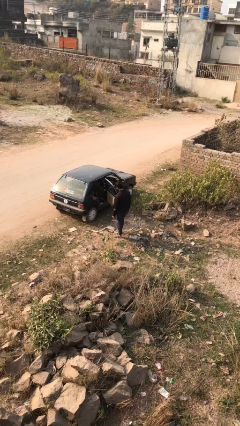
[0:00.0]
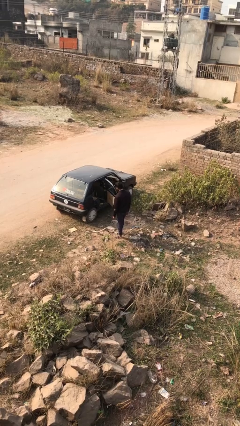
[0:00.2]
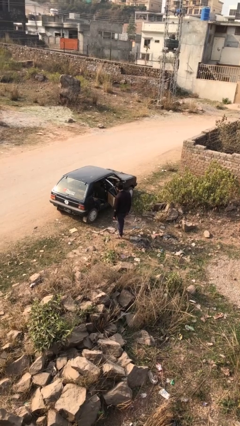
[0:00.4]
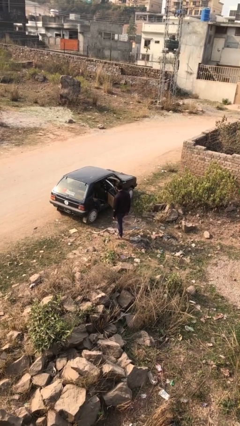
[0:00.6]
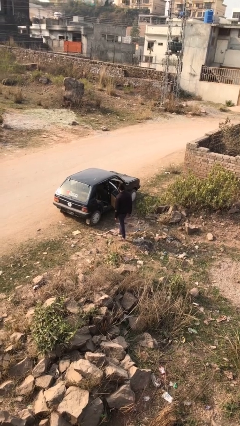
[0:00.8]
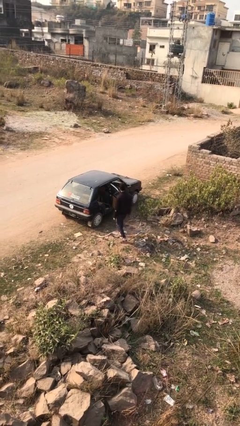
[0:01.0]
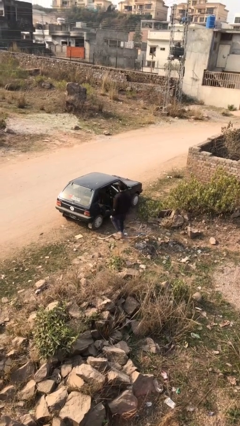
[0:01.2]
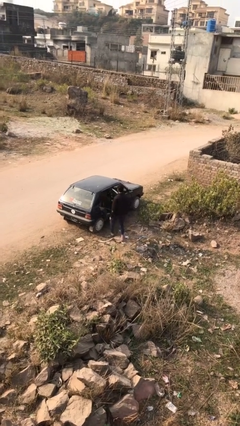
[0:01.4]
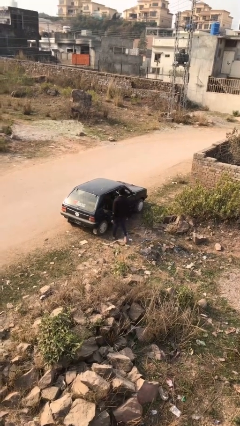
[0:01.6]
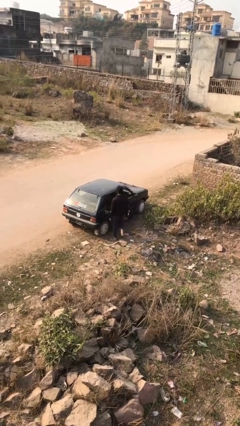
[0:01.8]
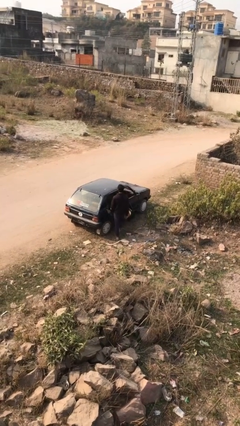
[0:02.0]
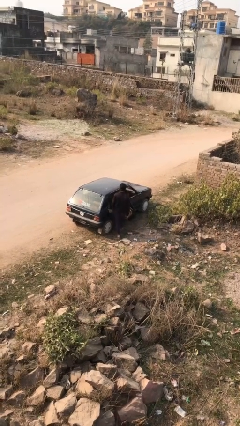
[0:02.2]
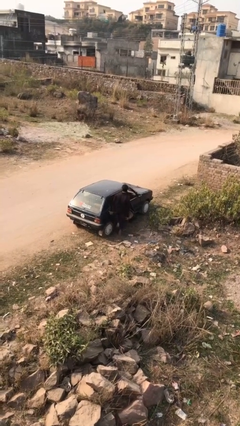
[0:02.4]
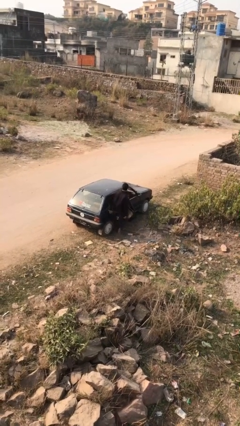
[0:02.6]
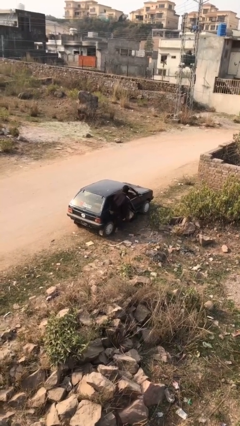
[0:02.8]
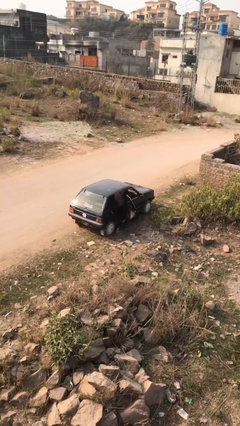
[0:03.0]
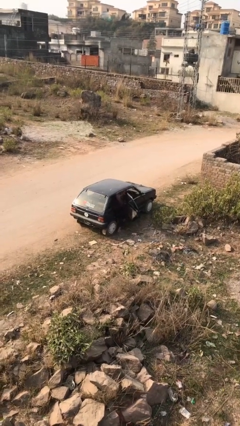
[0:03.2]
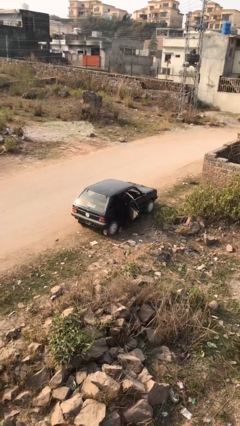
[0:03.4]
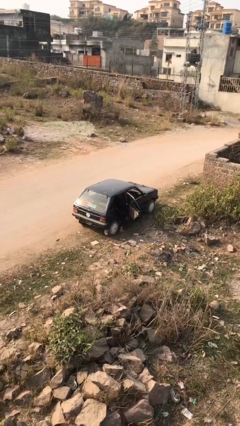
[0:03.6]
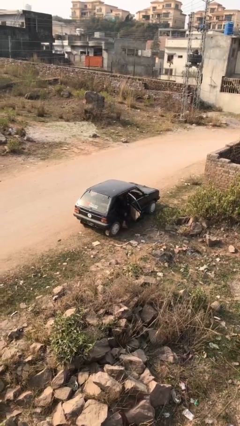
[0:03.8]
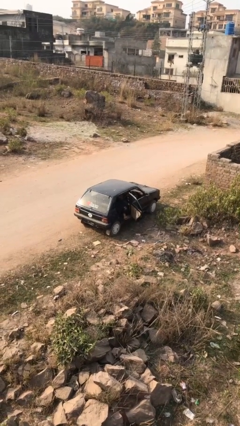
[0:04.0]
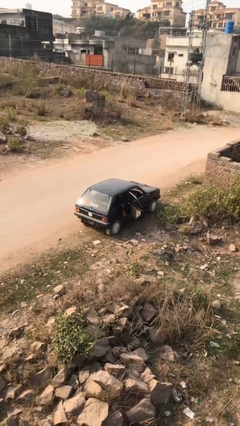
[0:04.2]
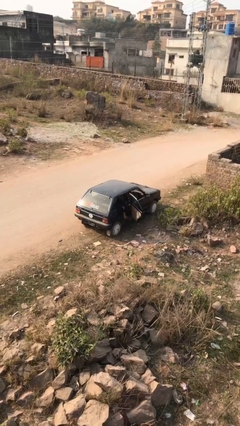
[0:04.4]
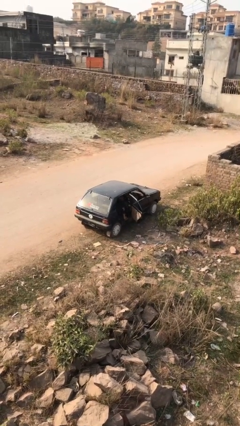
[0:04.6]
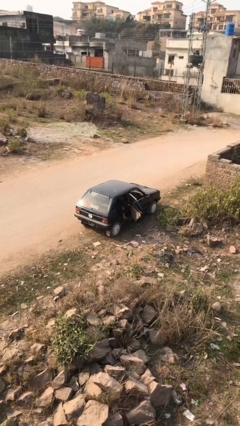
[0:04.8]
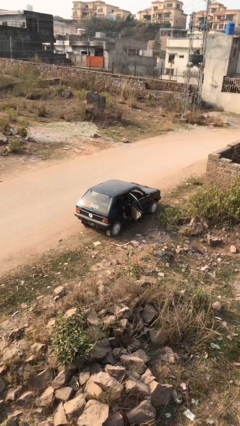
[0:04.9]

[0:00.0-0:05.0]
person enters car

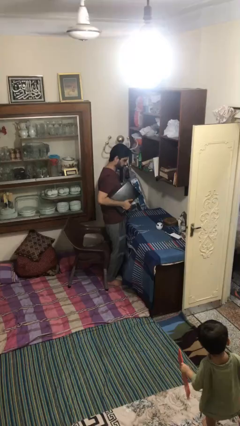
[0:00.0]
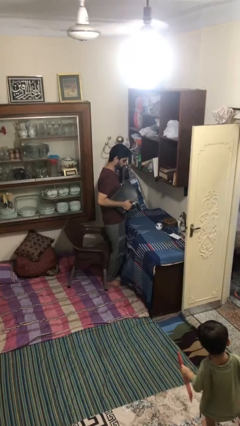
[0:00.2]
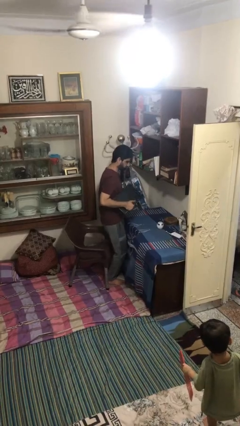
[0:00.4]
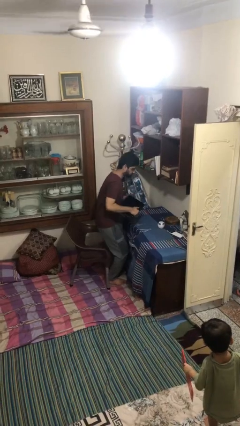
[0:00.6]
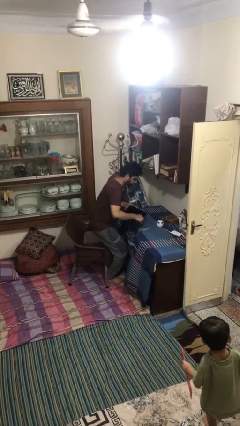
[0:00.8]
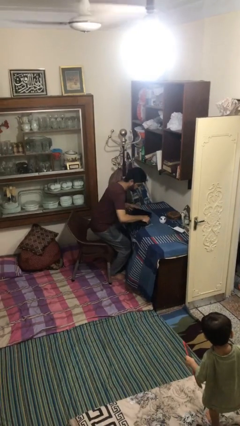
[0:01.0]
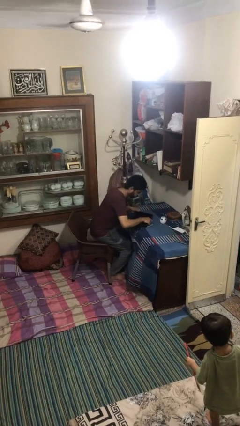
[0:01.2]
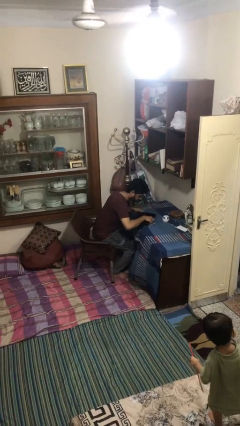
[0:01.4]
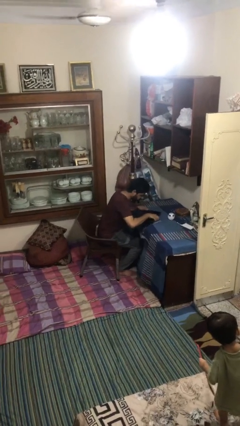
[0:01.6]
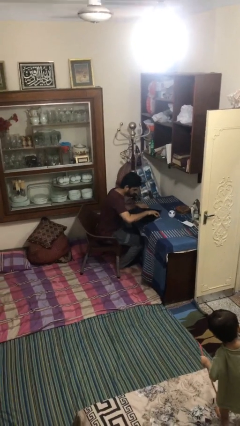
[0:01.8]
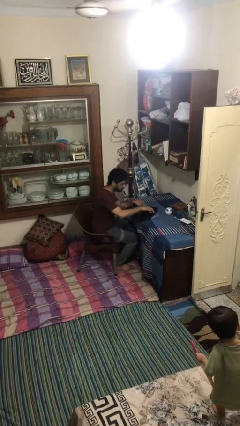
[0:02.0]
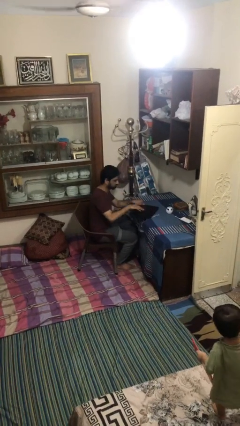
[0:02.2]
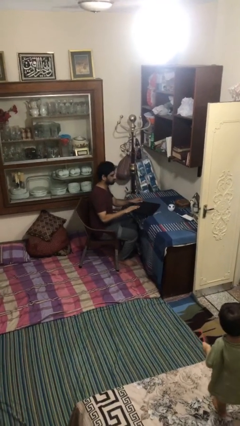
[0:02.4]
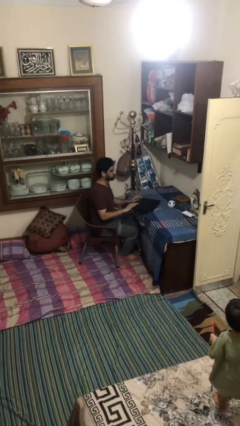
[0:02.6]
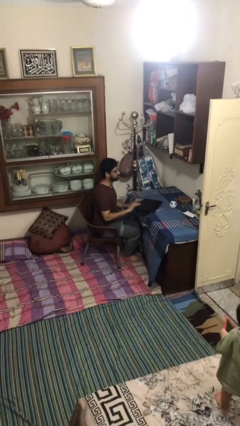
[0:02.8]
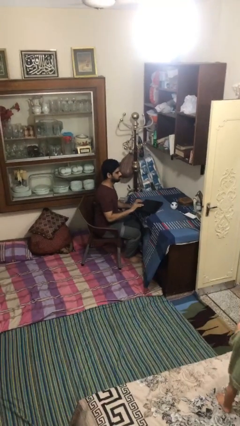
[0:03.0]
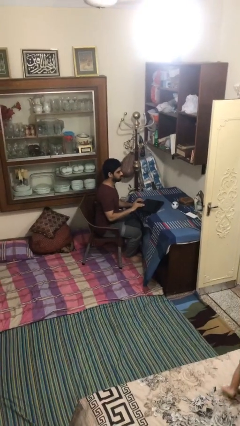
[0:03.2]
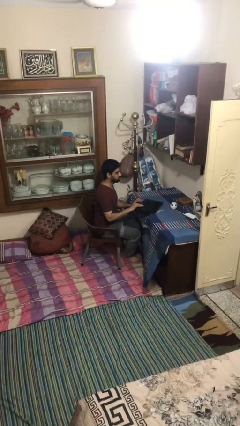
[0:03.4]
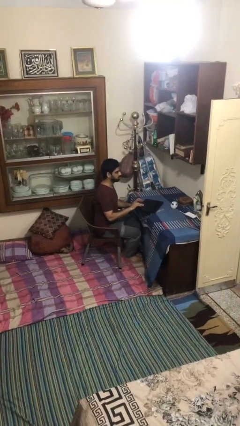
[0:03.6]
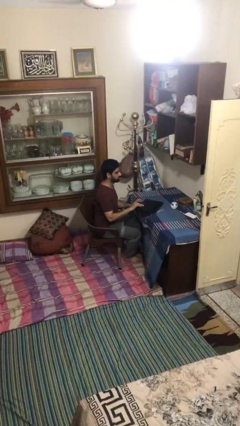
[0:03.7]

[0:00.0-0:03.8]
person sits down

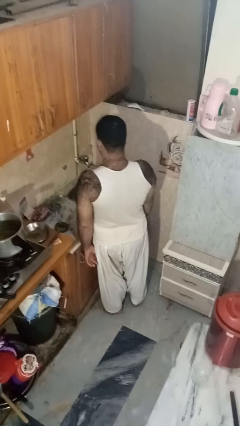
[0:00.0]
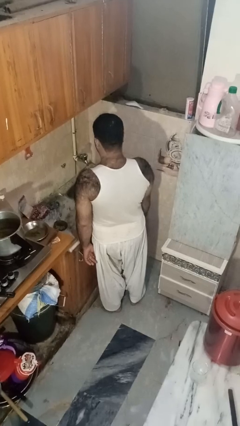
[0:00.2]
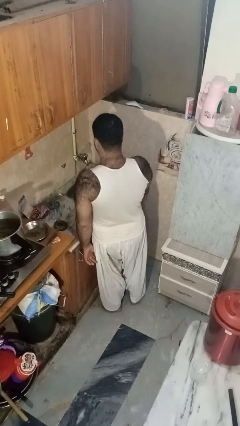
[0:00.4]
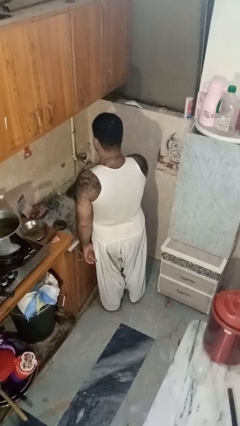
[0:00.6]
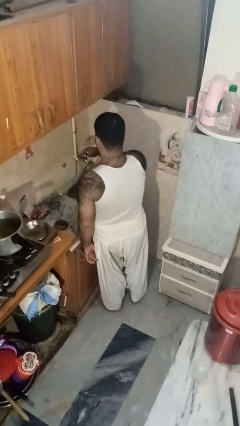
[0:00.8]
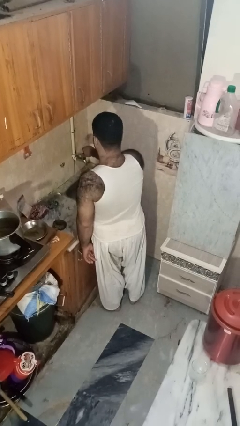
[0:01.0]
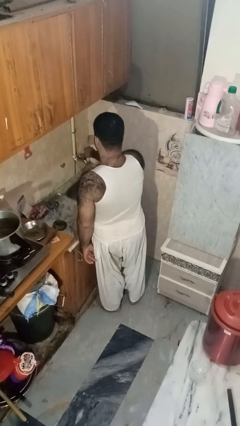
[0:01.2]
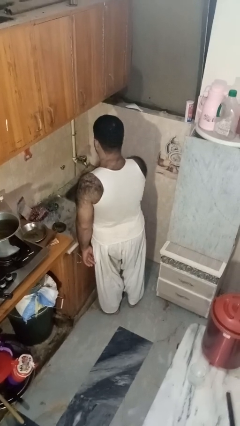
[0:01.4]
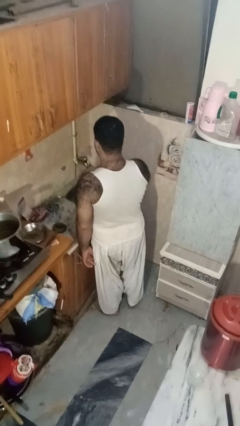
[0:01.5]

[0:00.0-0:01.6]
person turns off faucet

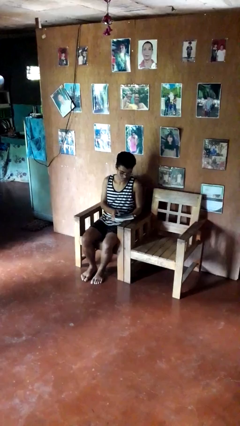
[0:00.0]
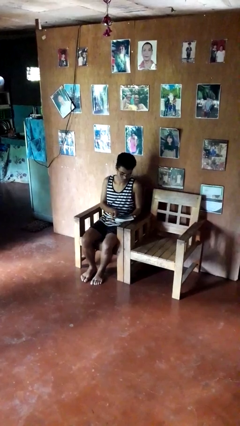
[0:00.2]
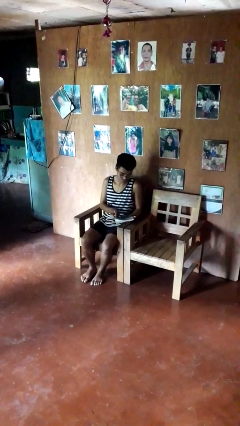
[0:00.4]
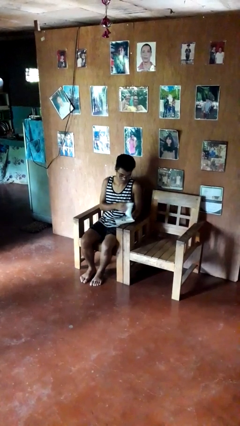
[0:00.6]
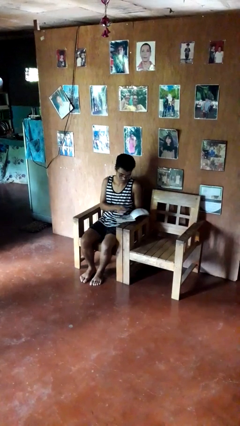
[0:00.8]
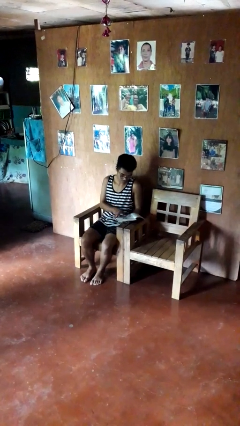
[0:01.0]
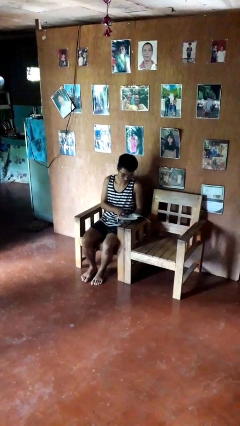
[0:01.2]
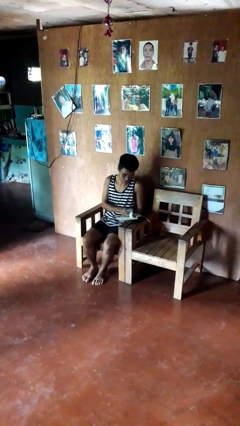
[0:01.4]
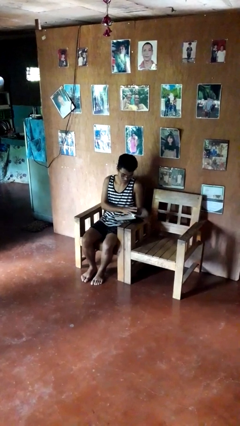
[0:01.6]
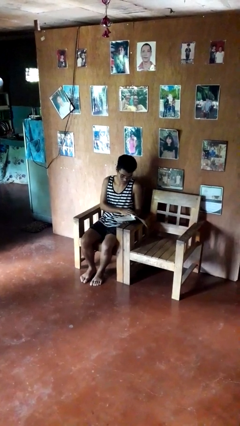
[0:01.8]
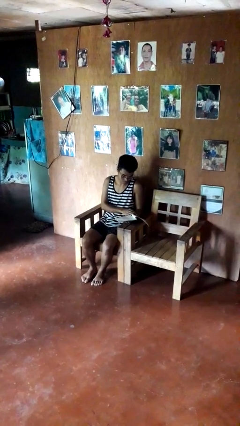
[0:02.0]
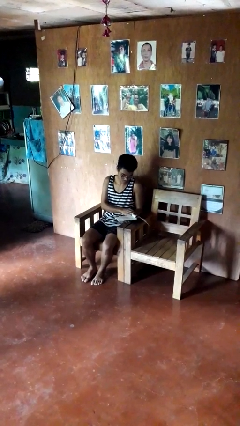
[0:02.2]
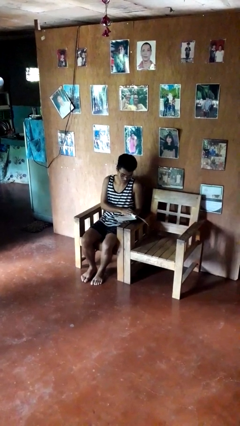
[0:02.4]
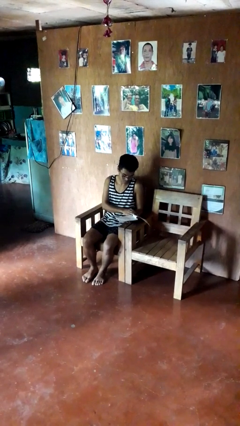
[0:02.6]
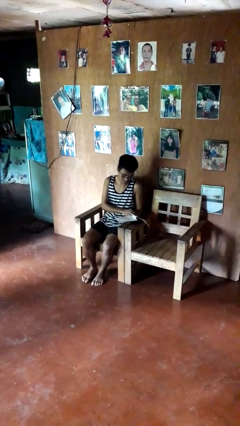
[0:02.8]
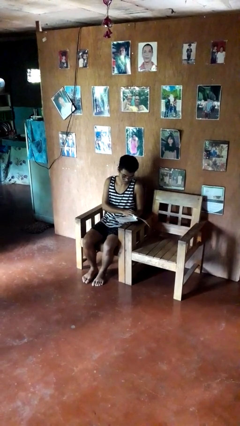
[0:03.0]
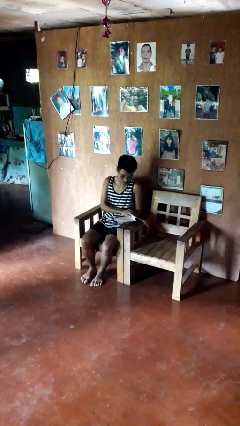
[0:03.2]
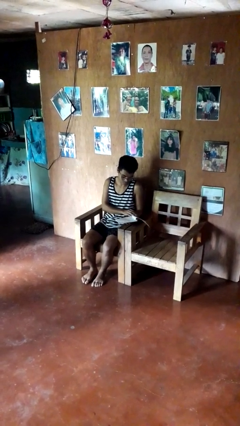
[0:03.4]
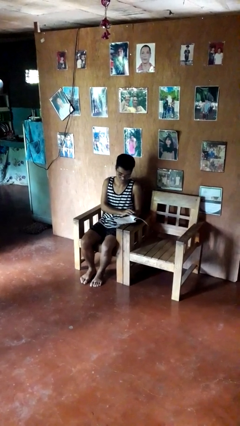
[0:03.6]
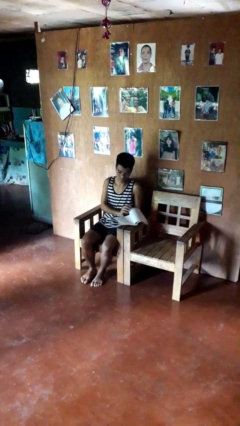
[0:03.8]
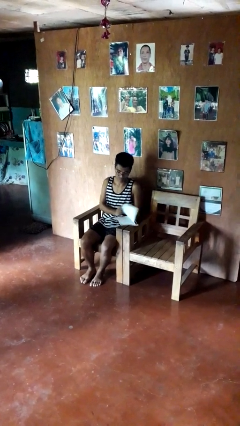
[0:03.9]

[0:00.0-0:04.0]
person reads book

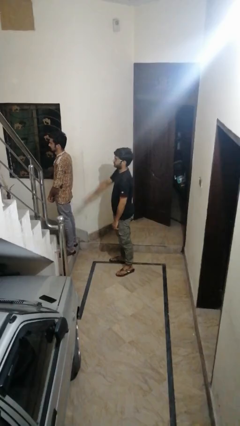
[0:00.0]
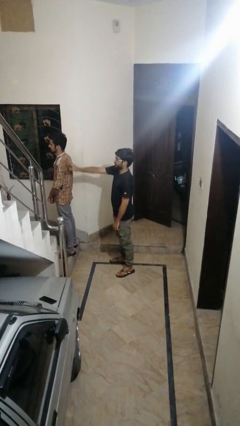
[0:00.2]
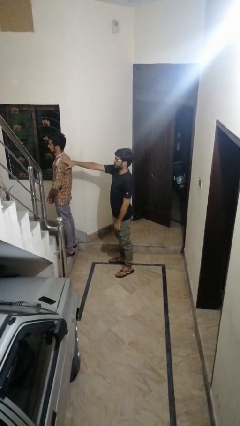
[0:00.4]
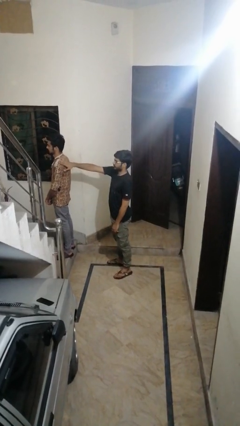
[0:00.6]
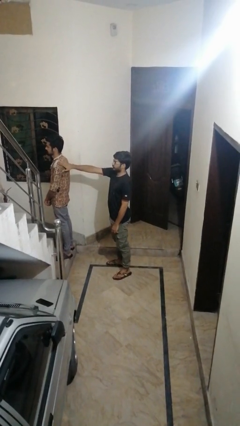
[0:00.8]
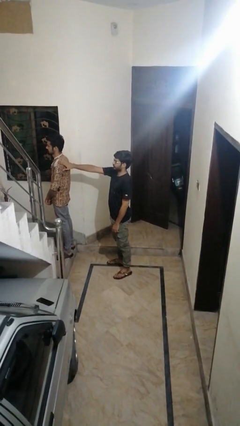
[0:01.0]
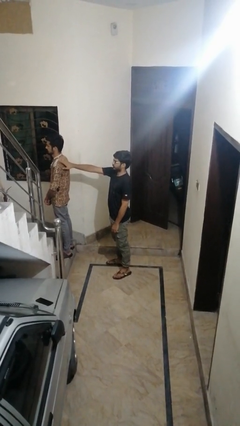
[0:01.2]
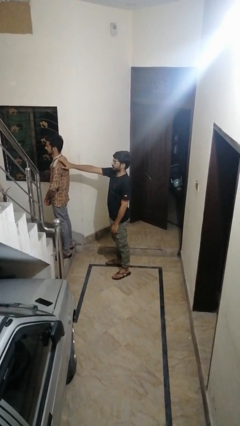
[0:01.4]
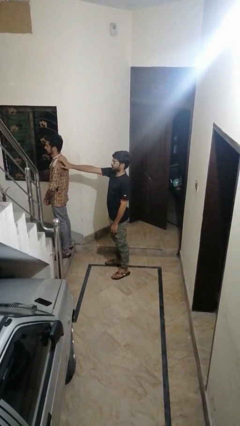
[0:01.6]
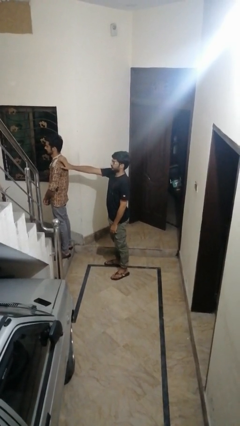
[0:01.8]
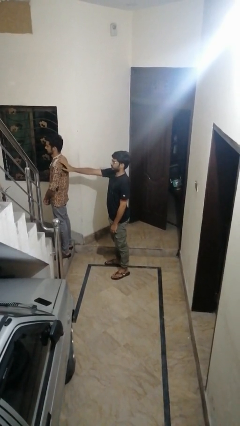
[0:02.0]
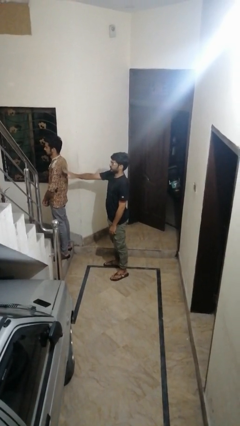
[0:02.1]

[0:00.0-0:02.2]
person touches back of person

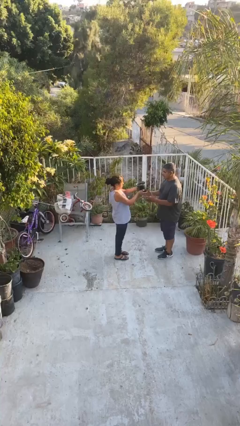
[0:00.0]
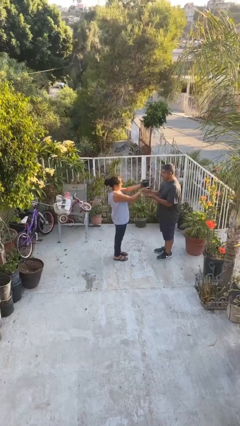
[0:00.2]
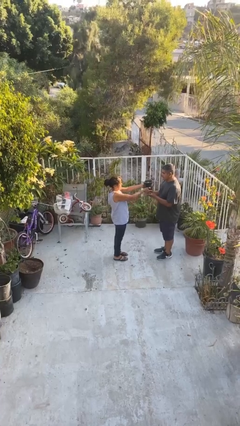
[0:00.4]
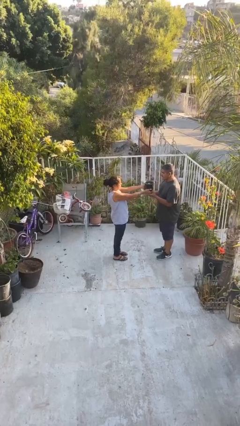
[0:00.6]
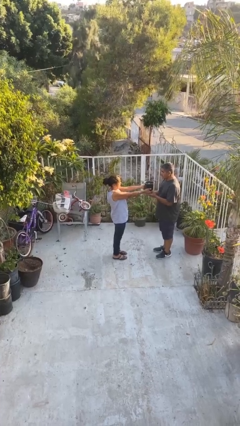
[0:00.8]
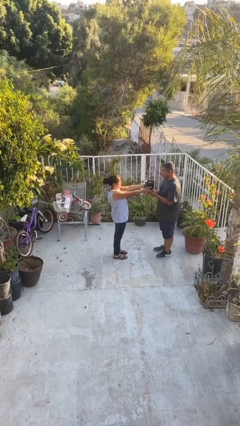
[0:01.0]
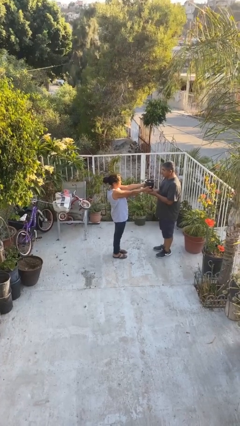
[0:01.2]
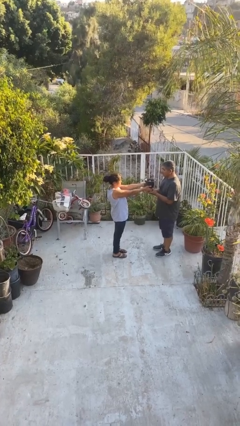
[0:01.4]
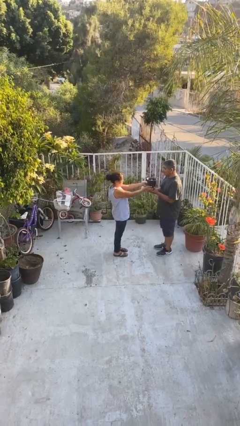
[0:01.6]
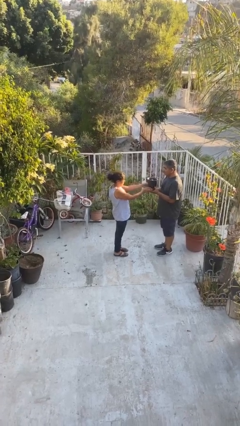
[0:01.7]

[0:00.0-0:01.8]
person transfers object to person
